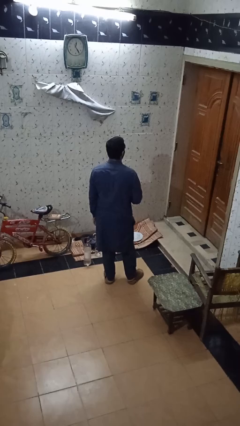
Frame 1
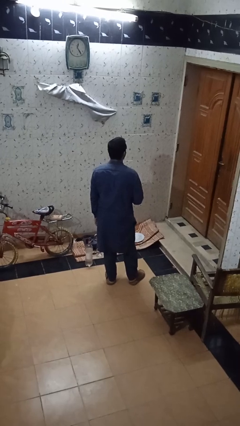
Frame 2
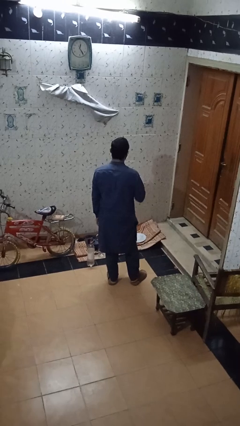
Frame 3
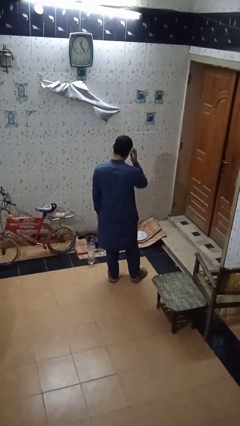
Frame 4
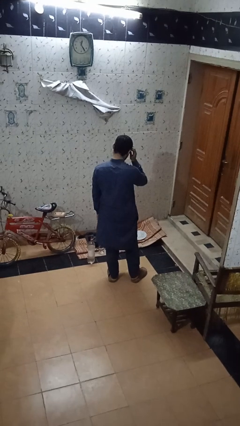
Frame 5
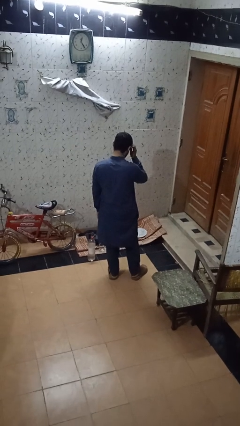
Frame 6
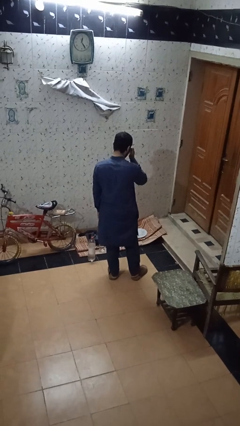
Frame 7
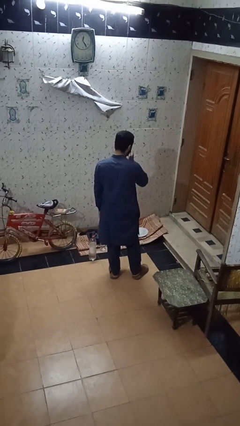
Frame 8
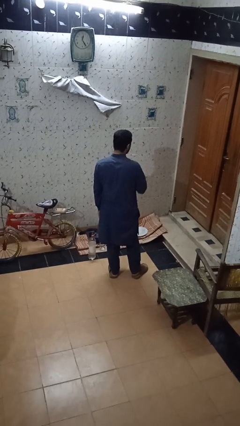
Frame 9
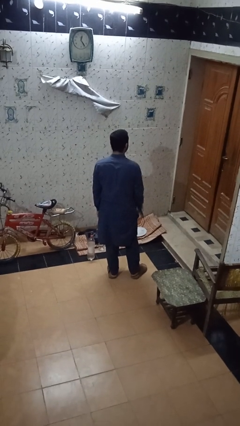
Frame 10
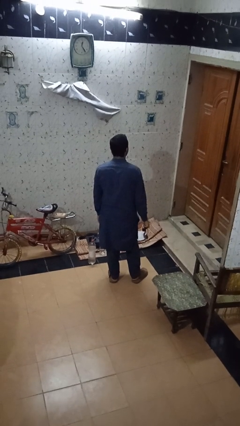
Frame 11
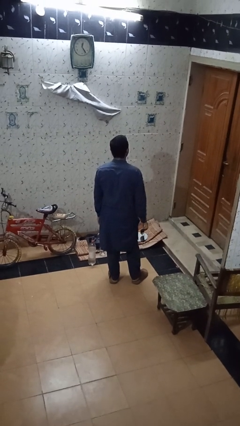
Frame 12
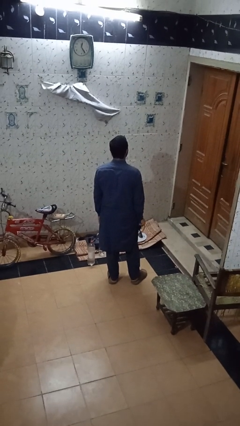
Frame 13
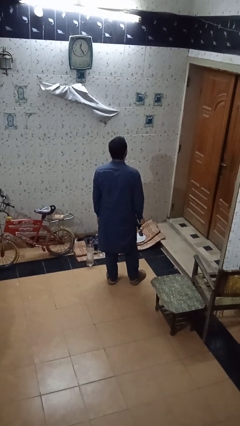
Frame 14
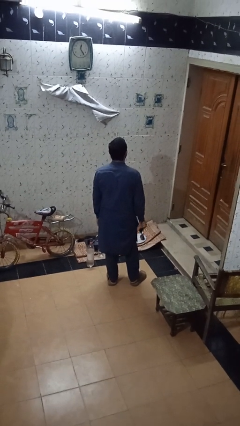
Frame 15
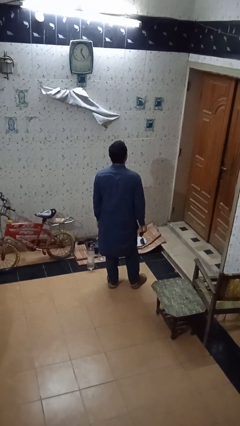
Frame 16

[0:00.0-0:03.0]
person takes off sunglasses

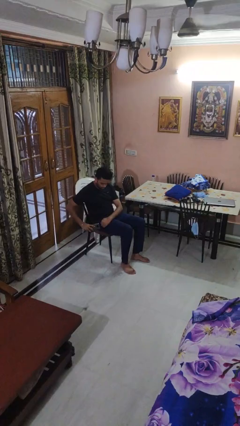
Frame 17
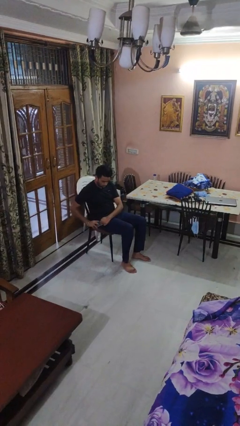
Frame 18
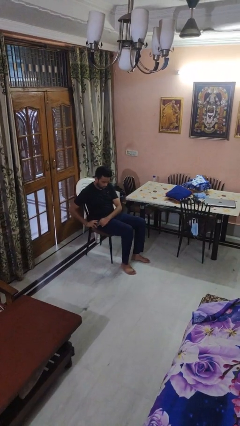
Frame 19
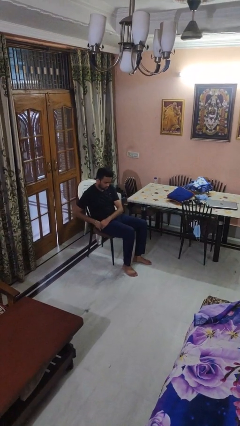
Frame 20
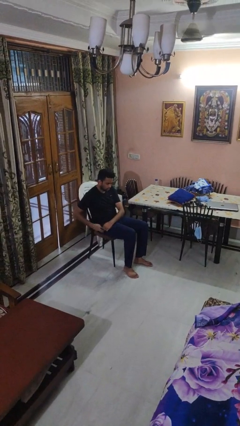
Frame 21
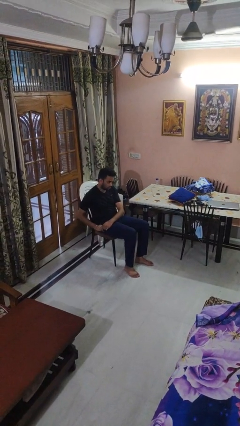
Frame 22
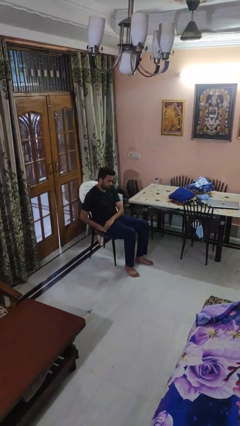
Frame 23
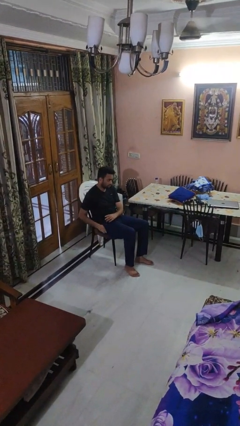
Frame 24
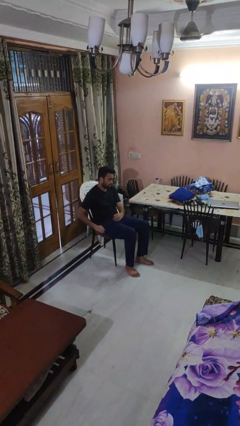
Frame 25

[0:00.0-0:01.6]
person puts phone into pocket

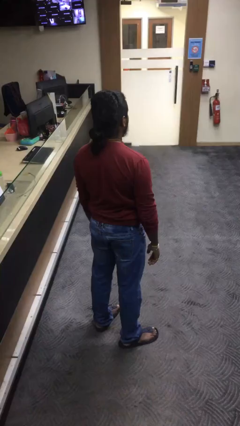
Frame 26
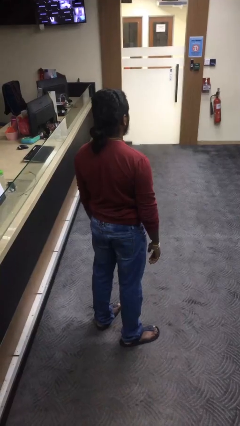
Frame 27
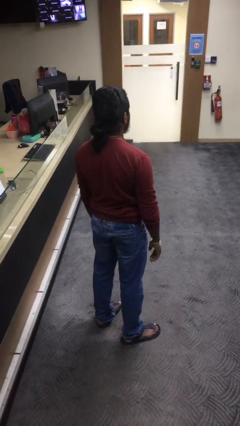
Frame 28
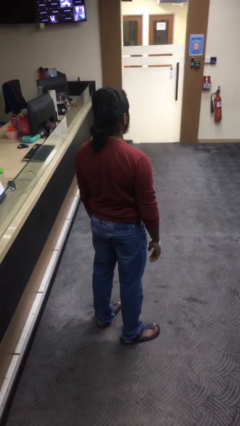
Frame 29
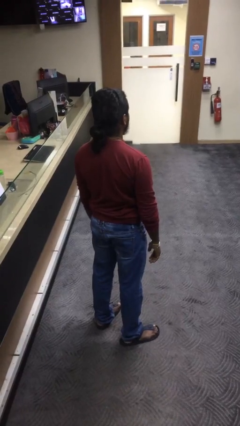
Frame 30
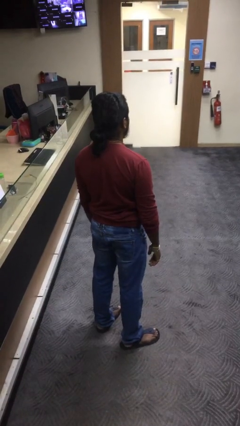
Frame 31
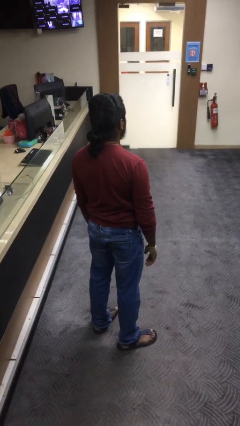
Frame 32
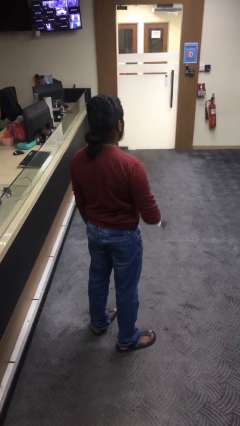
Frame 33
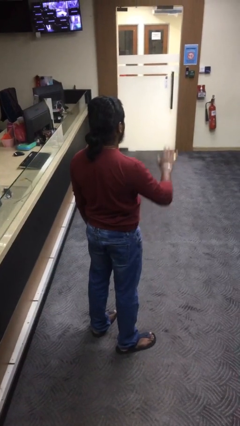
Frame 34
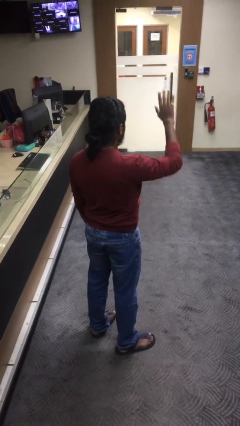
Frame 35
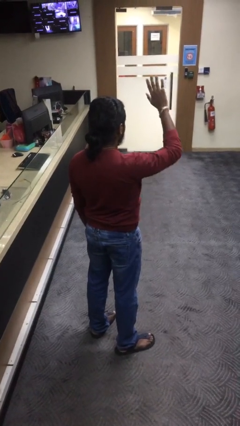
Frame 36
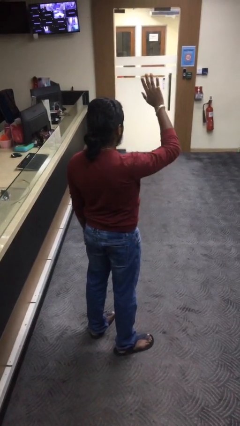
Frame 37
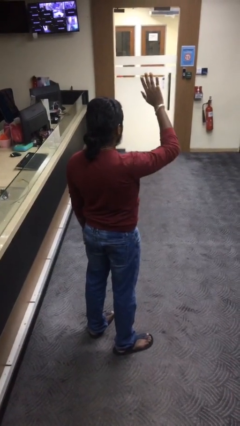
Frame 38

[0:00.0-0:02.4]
person gestures raise hand

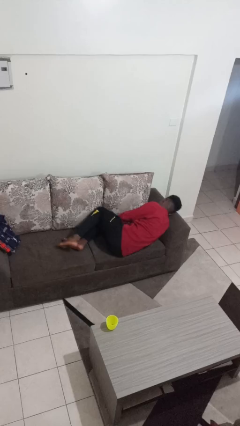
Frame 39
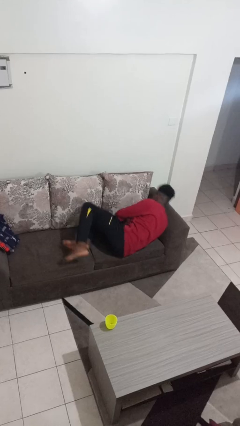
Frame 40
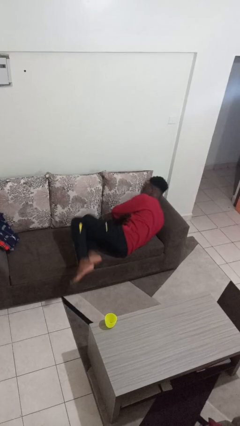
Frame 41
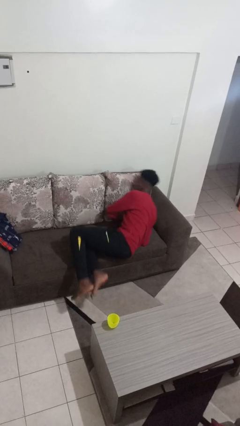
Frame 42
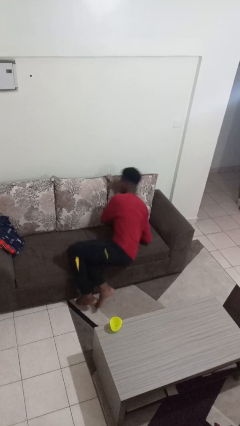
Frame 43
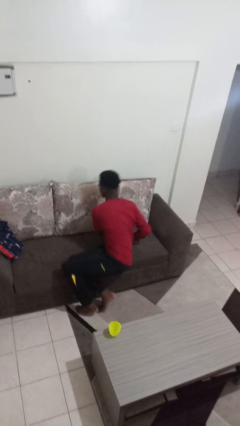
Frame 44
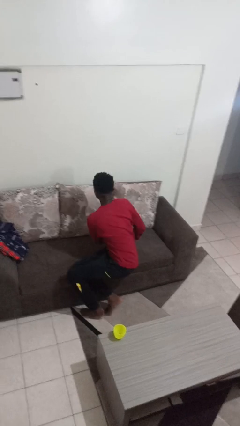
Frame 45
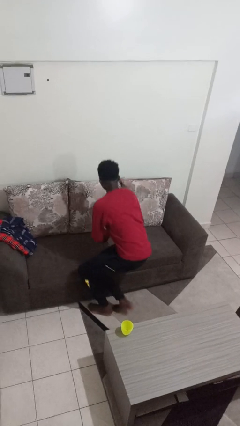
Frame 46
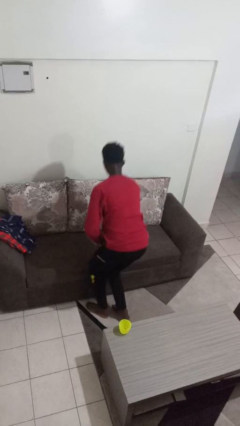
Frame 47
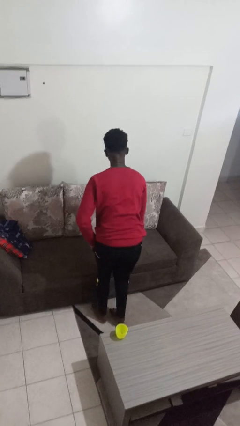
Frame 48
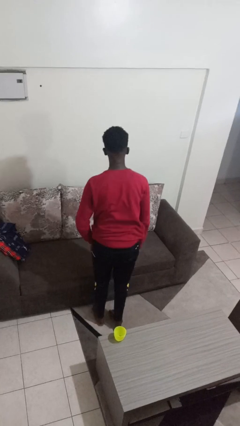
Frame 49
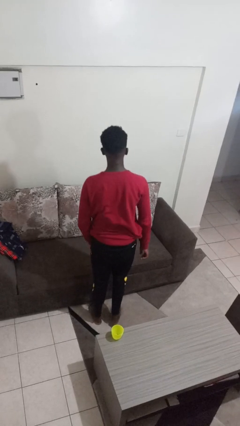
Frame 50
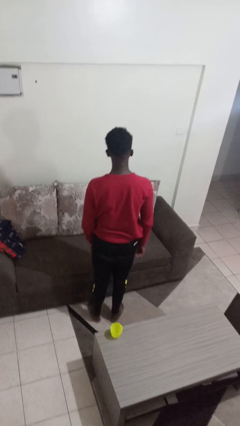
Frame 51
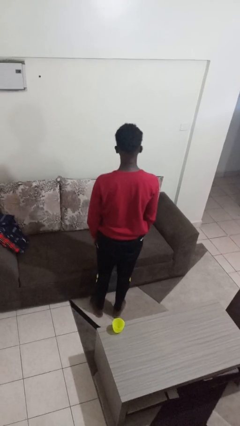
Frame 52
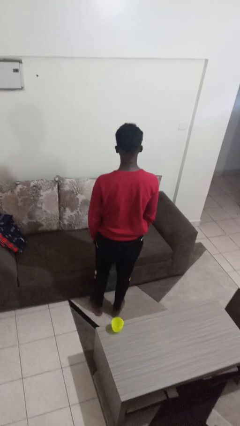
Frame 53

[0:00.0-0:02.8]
person stands up

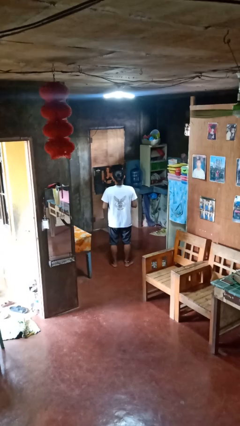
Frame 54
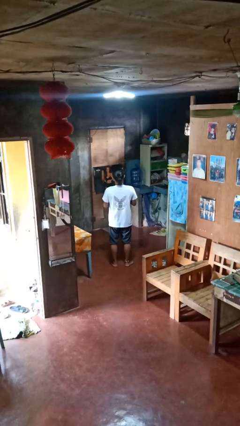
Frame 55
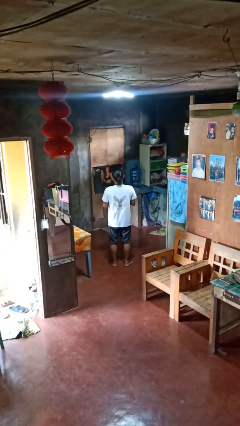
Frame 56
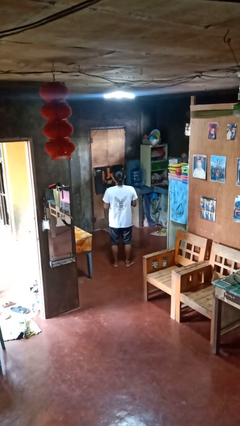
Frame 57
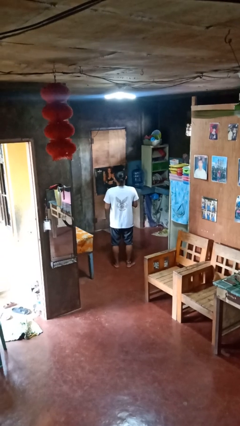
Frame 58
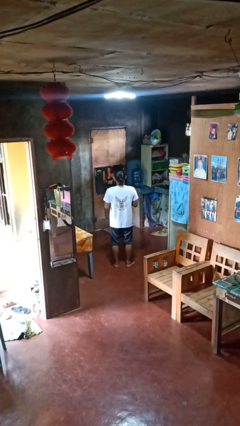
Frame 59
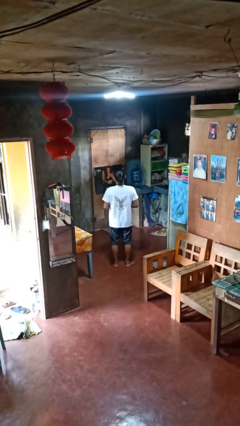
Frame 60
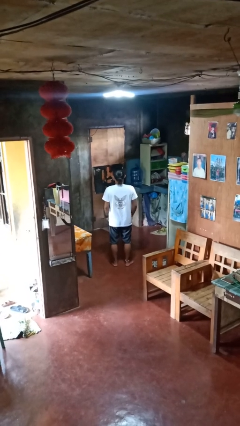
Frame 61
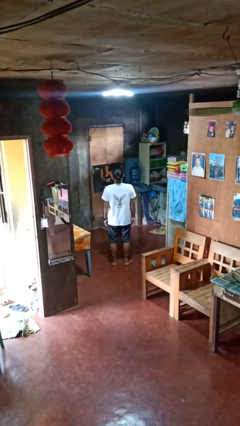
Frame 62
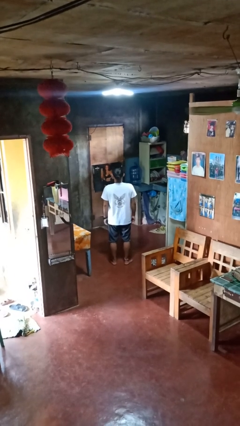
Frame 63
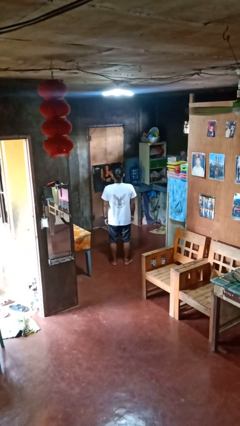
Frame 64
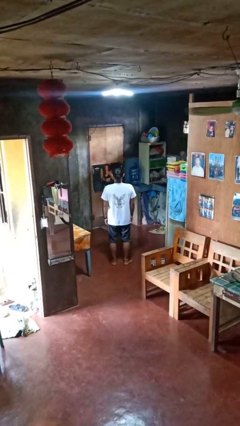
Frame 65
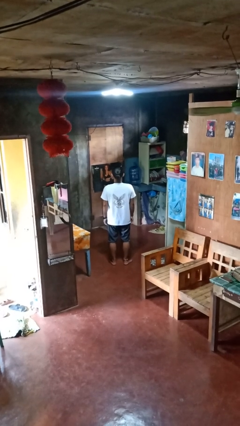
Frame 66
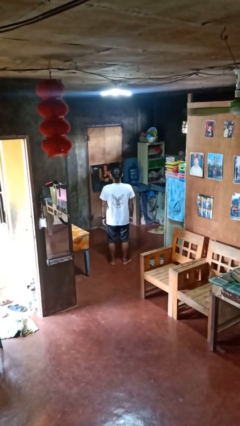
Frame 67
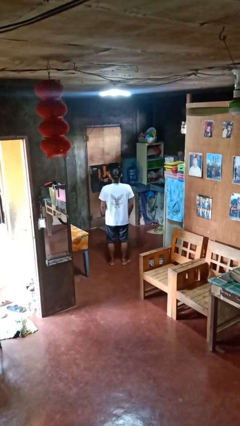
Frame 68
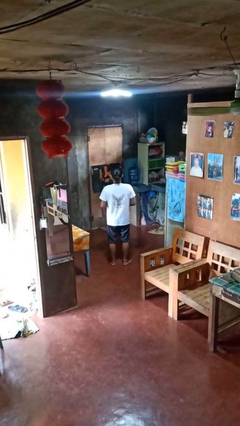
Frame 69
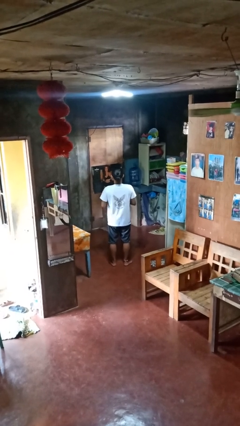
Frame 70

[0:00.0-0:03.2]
person unbuttons shirt

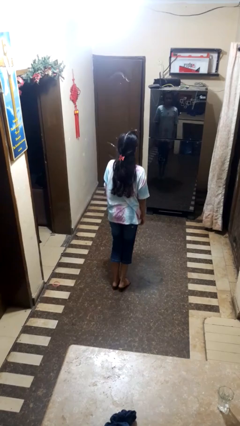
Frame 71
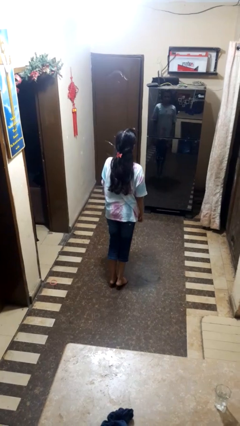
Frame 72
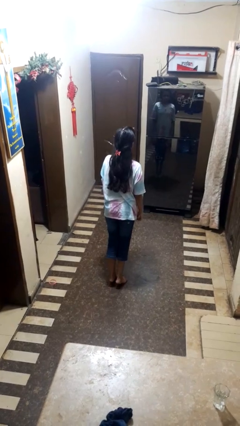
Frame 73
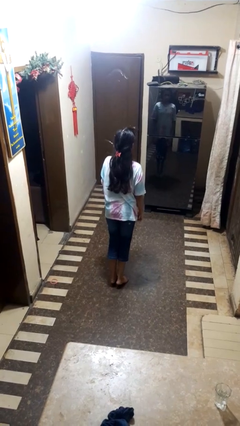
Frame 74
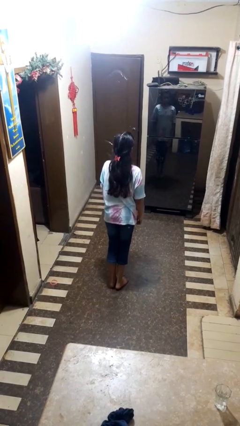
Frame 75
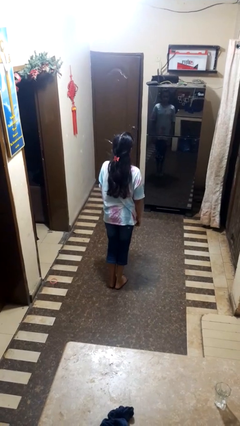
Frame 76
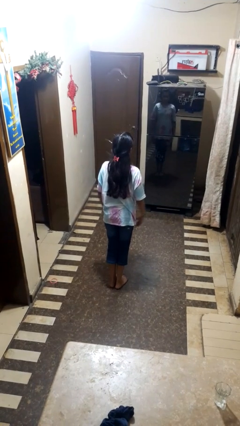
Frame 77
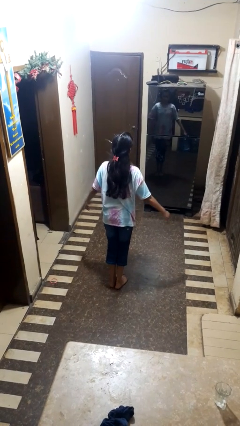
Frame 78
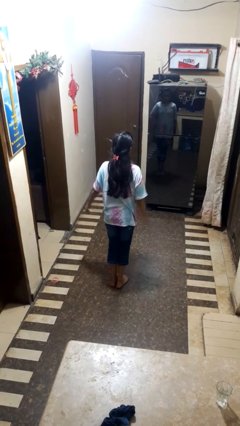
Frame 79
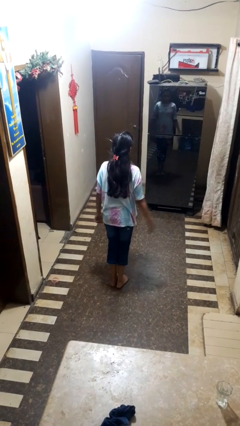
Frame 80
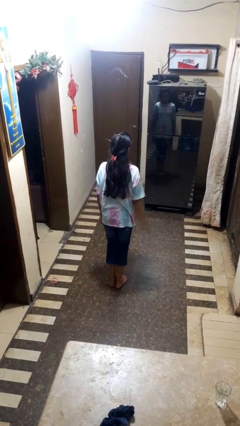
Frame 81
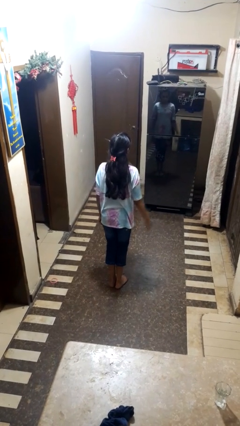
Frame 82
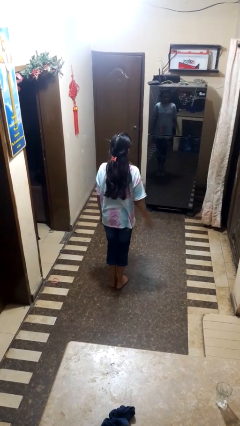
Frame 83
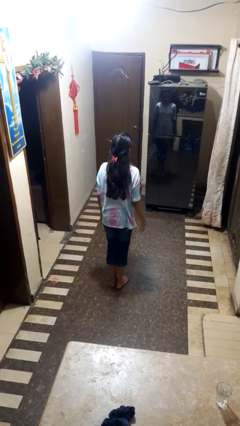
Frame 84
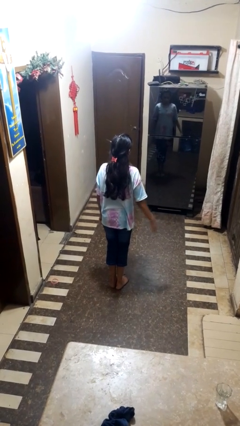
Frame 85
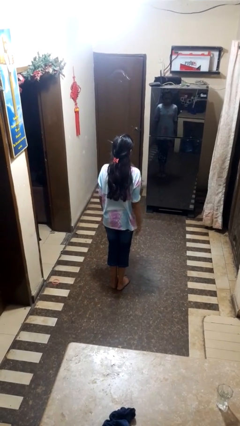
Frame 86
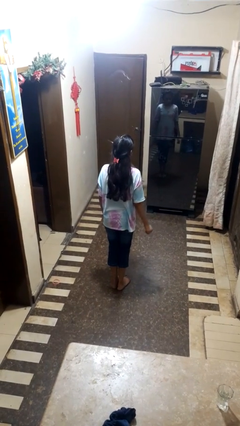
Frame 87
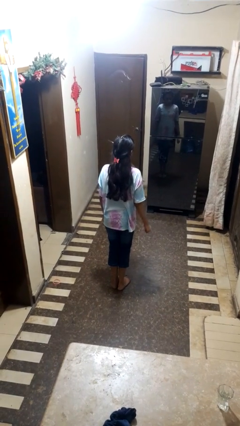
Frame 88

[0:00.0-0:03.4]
person slaps hands on thighs

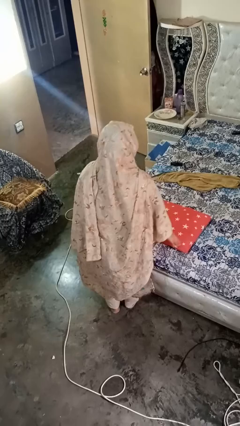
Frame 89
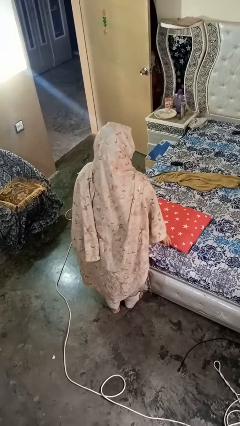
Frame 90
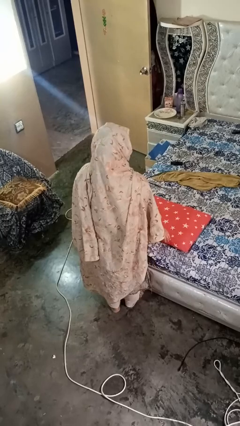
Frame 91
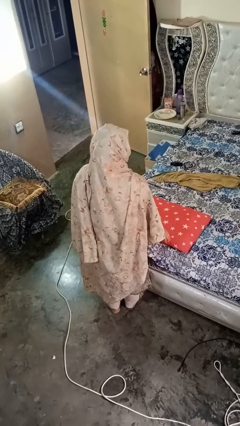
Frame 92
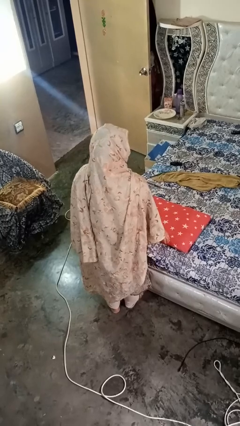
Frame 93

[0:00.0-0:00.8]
person waves hand over object
